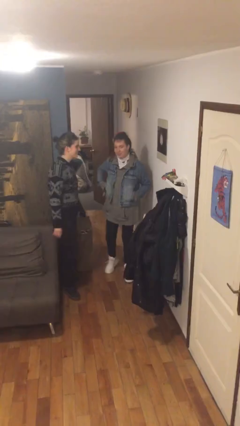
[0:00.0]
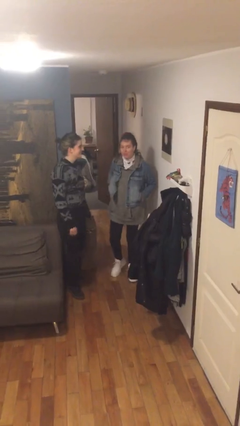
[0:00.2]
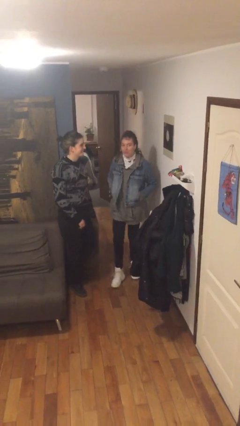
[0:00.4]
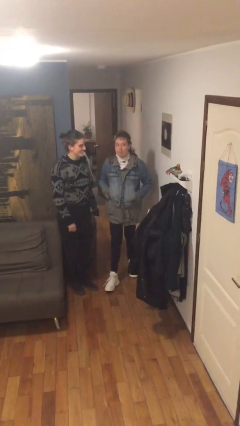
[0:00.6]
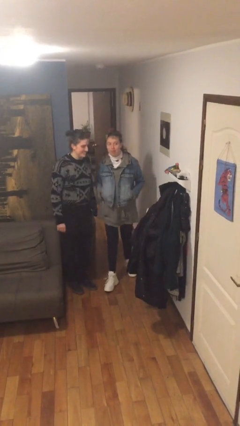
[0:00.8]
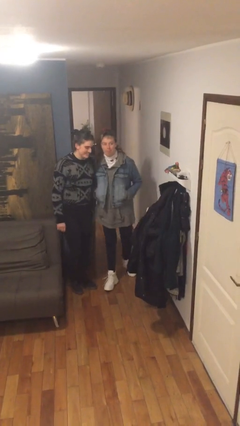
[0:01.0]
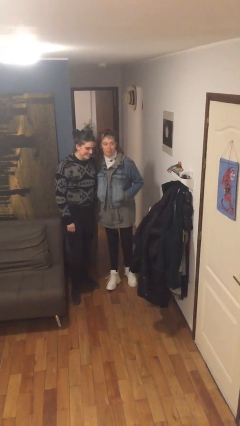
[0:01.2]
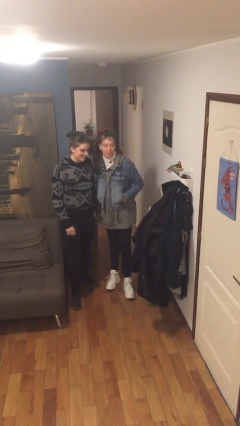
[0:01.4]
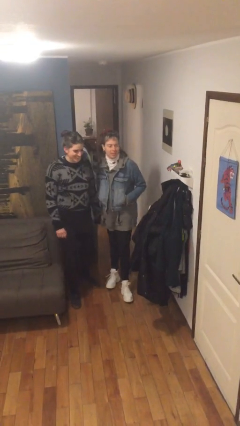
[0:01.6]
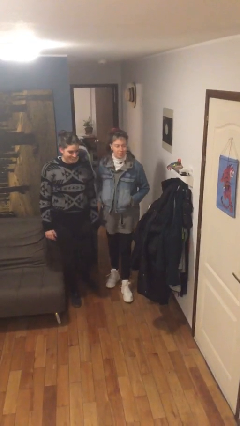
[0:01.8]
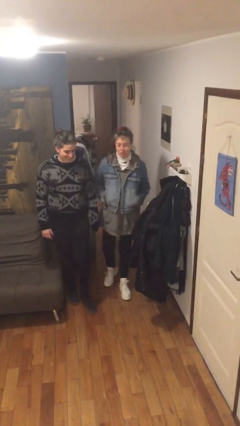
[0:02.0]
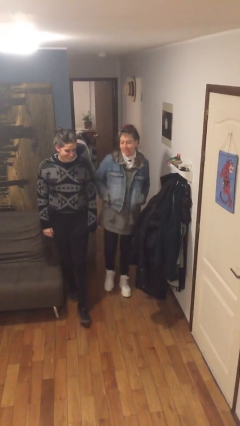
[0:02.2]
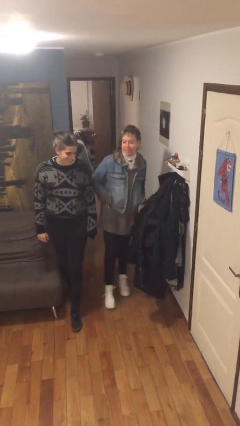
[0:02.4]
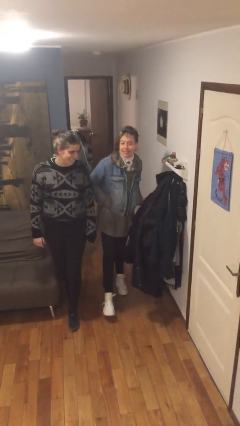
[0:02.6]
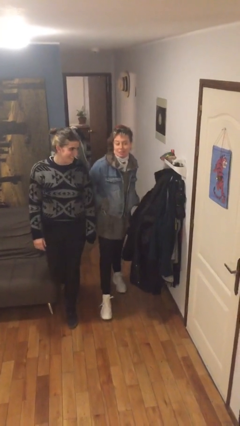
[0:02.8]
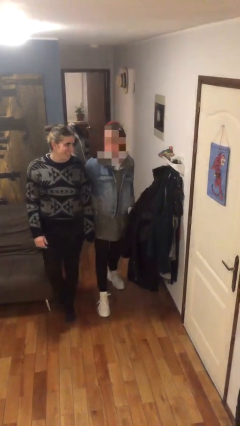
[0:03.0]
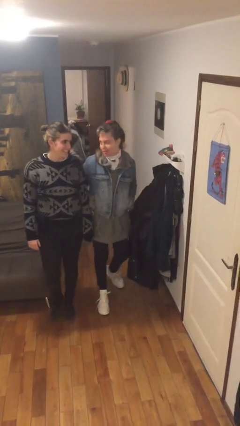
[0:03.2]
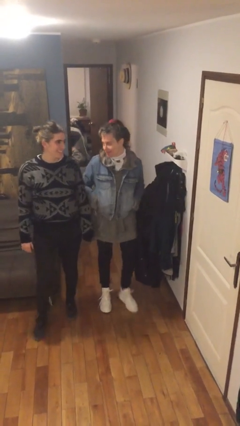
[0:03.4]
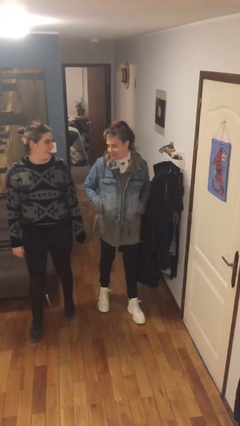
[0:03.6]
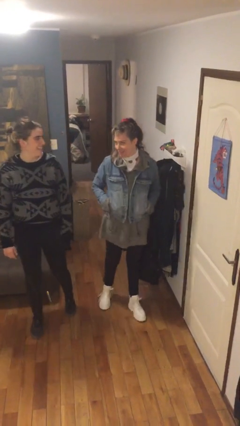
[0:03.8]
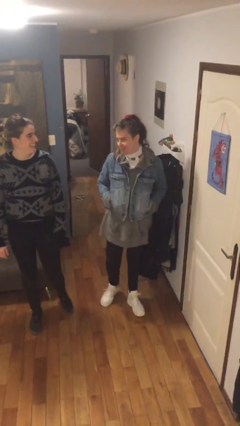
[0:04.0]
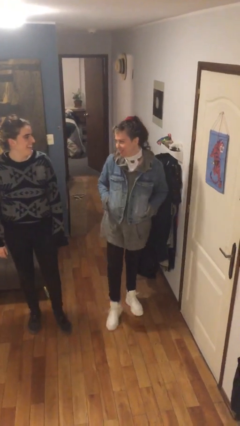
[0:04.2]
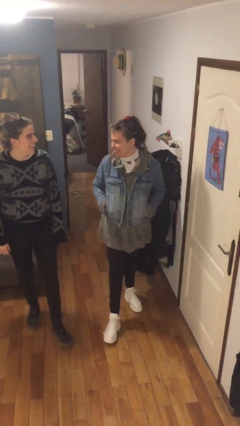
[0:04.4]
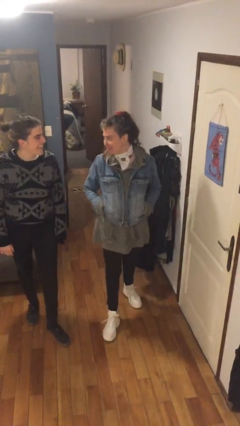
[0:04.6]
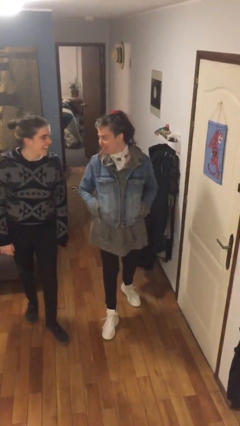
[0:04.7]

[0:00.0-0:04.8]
person talks to person

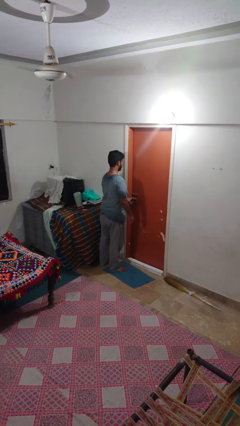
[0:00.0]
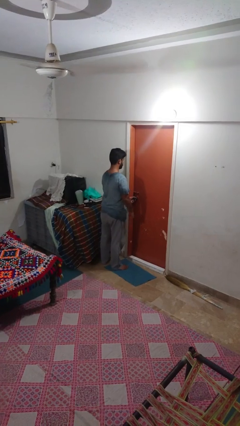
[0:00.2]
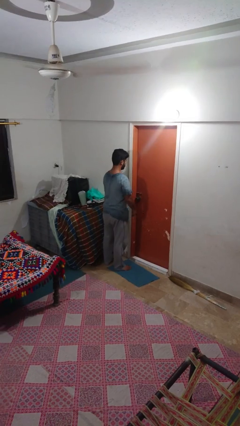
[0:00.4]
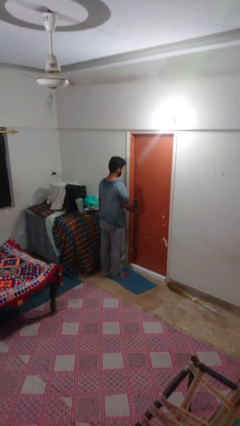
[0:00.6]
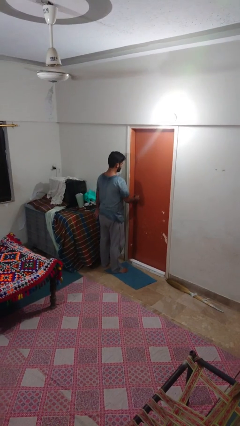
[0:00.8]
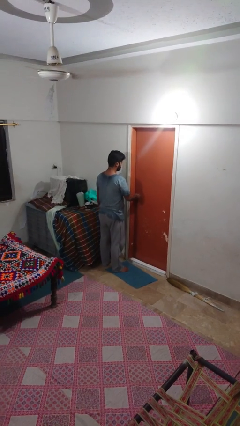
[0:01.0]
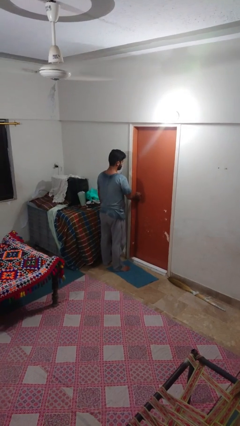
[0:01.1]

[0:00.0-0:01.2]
person closes facility door

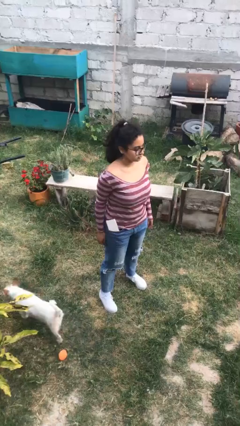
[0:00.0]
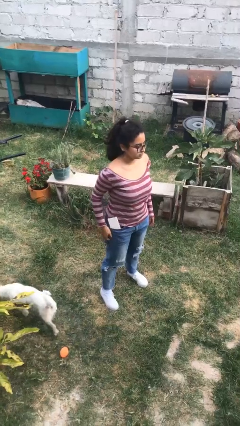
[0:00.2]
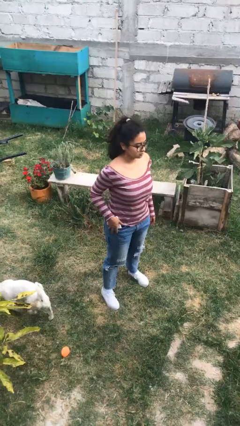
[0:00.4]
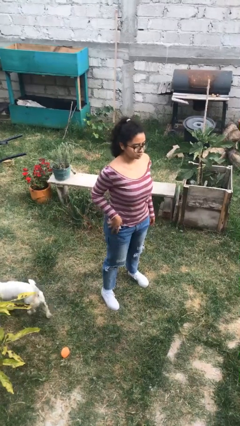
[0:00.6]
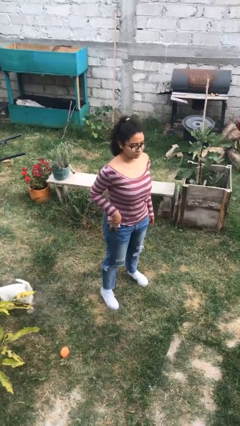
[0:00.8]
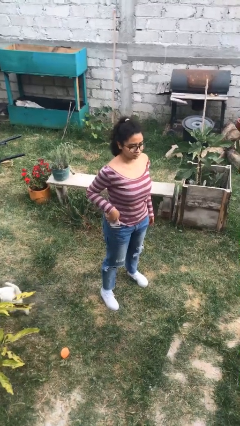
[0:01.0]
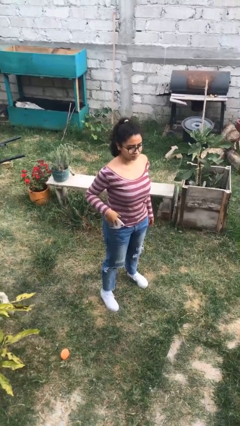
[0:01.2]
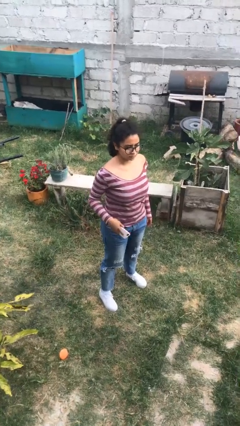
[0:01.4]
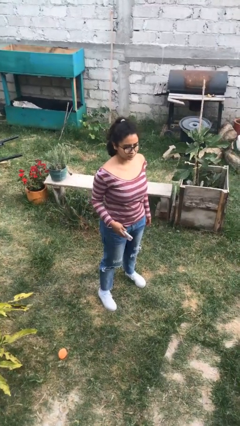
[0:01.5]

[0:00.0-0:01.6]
person takes phone from pocket

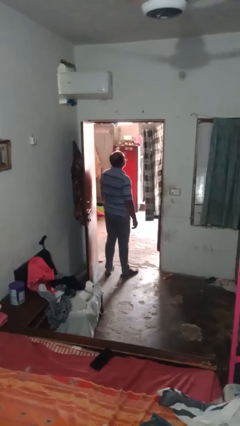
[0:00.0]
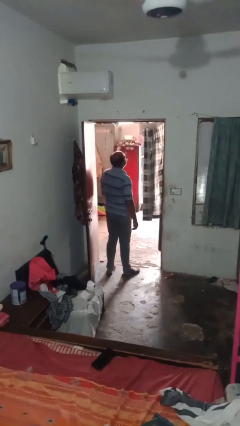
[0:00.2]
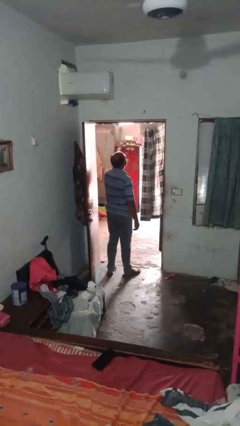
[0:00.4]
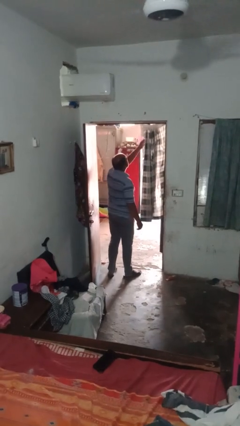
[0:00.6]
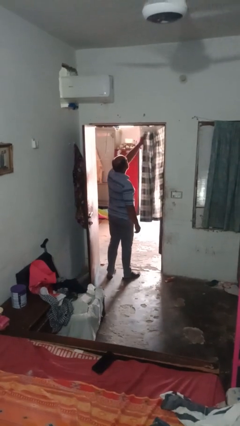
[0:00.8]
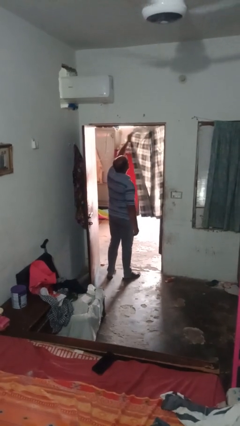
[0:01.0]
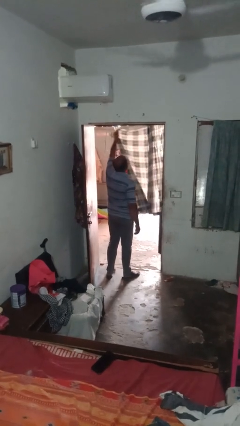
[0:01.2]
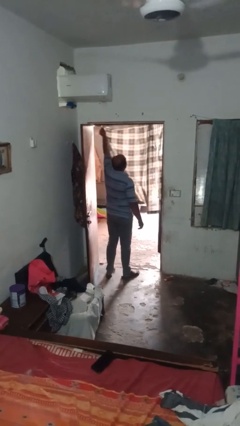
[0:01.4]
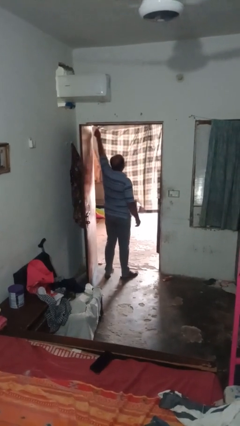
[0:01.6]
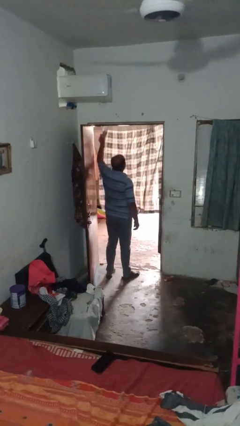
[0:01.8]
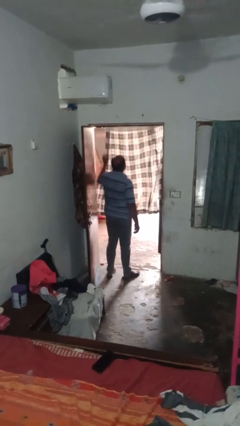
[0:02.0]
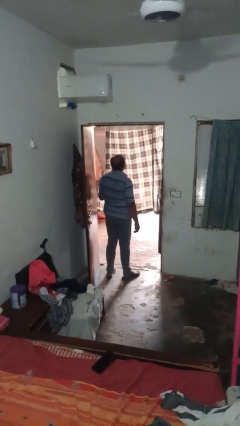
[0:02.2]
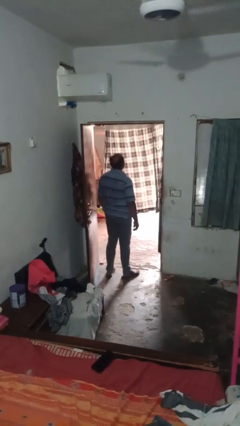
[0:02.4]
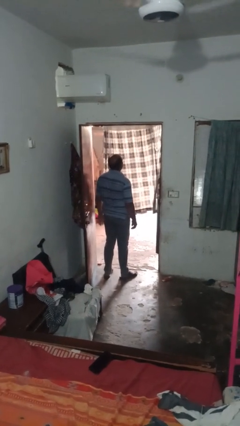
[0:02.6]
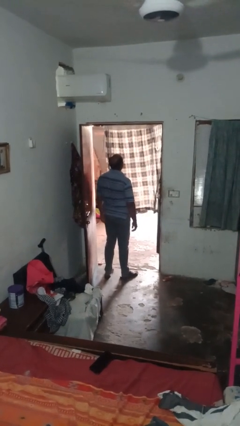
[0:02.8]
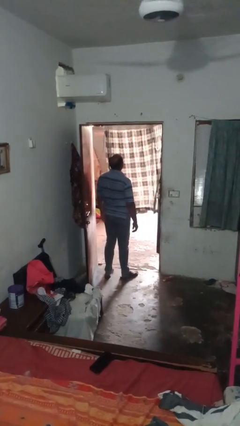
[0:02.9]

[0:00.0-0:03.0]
person closes curtains

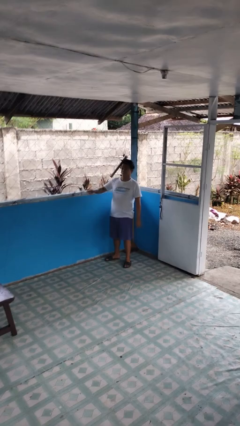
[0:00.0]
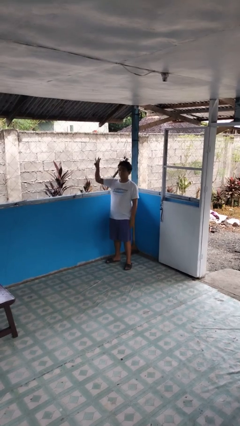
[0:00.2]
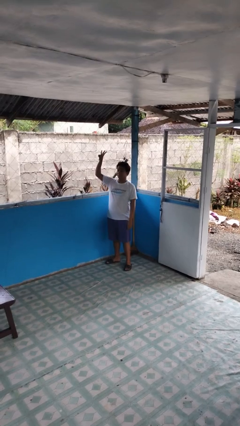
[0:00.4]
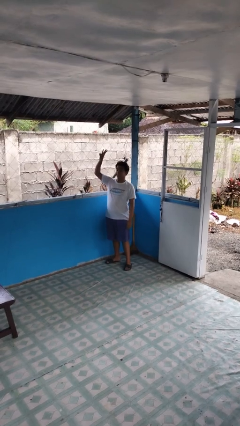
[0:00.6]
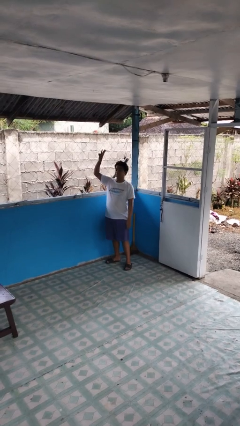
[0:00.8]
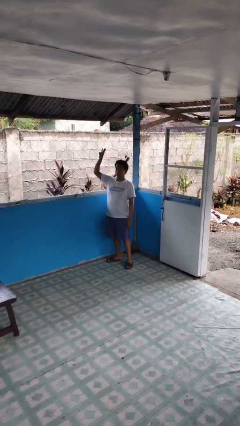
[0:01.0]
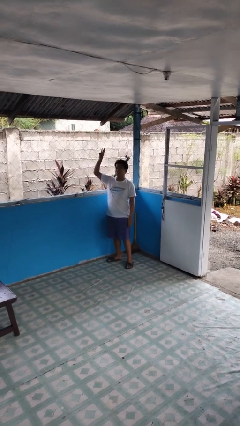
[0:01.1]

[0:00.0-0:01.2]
person gestures number three

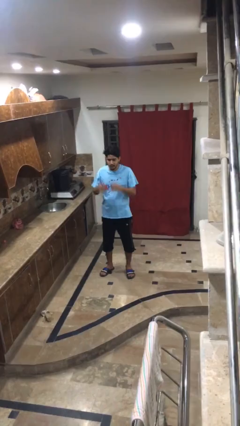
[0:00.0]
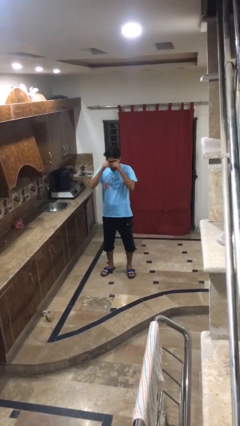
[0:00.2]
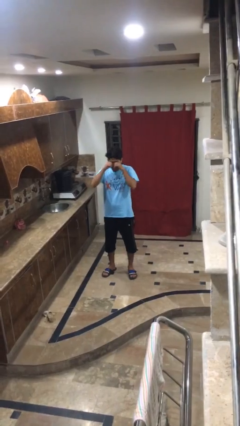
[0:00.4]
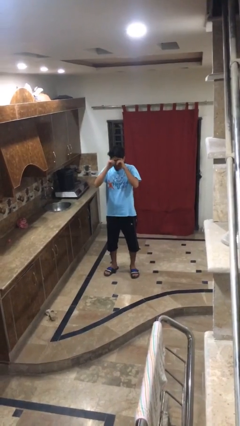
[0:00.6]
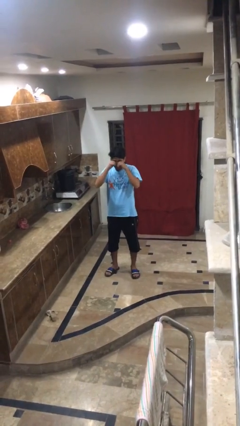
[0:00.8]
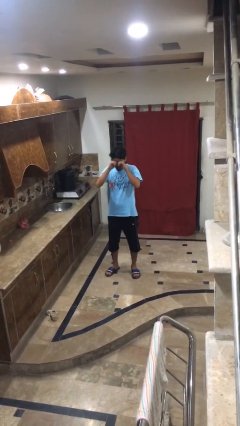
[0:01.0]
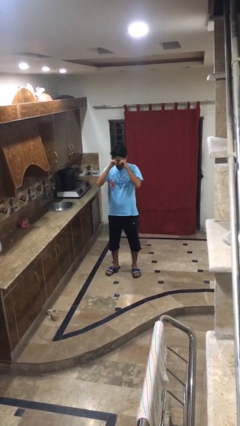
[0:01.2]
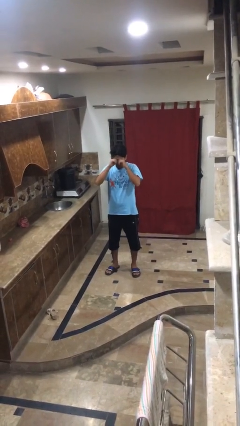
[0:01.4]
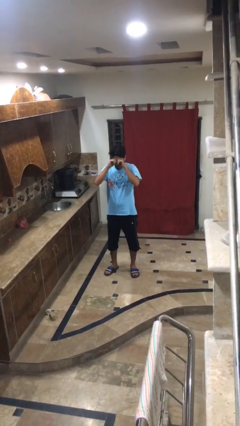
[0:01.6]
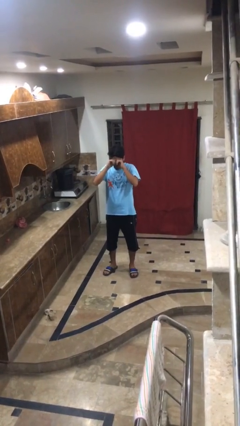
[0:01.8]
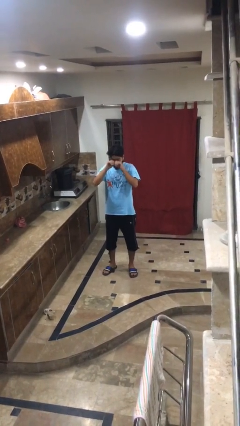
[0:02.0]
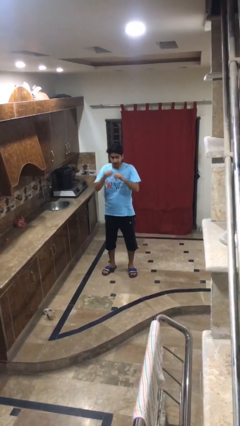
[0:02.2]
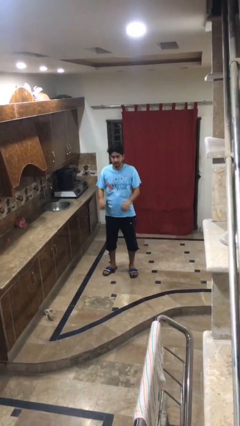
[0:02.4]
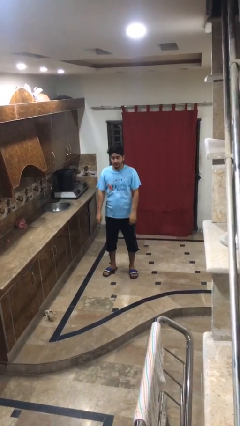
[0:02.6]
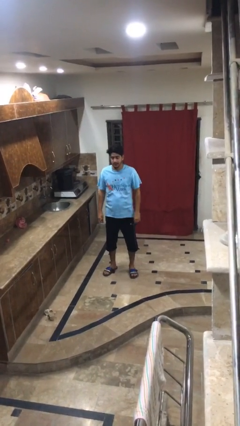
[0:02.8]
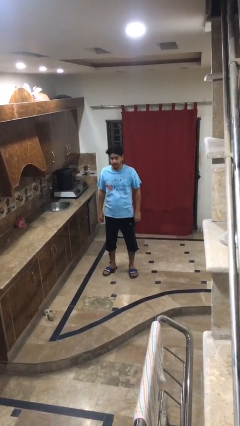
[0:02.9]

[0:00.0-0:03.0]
person rubs eyes

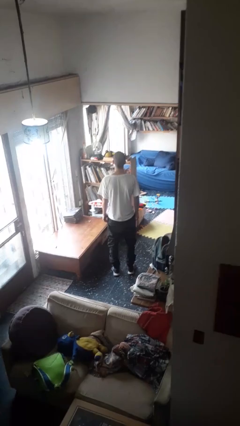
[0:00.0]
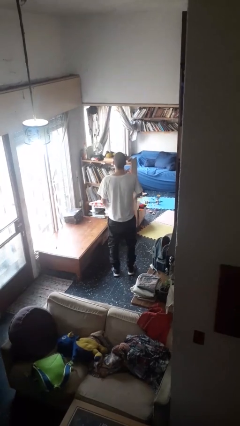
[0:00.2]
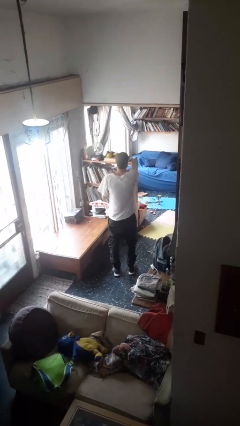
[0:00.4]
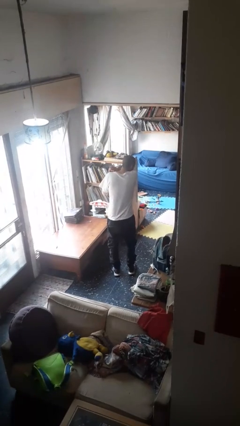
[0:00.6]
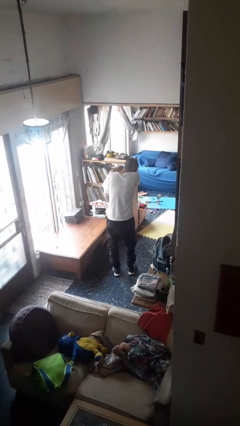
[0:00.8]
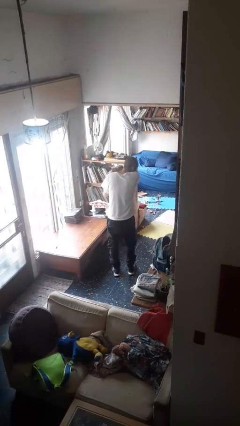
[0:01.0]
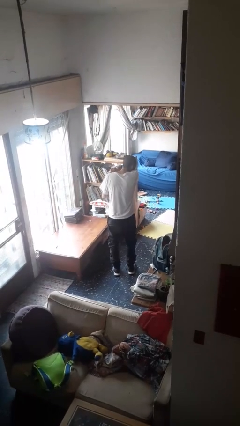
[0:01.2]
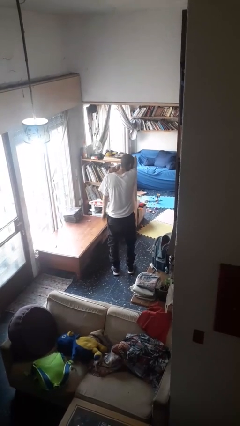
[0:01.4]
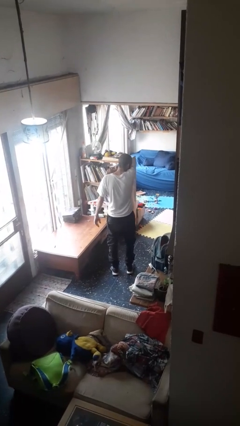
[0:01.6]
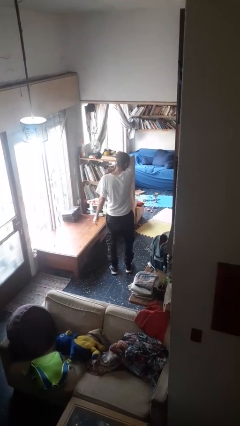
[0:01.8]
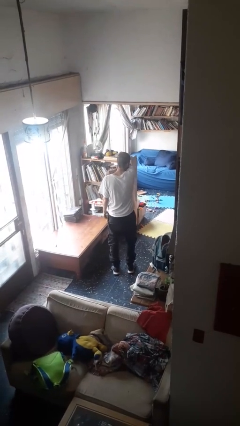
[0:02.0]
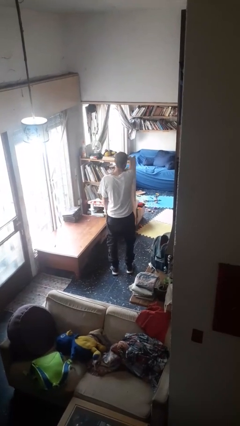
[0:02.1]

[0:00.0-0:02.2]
person sneezes into arm
